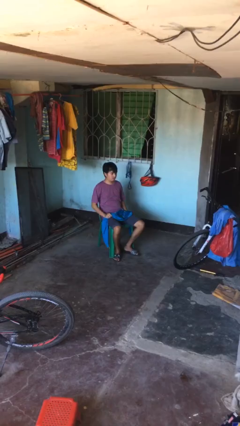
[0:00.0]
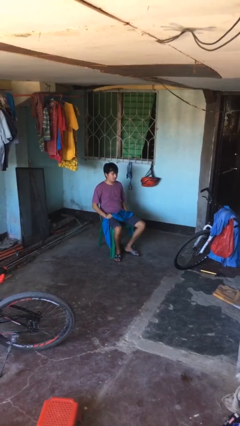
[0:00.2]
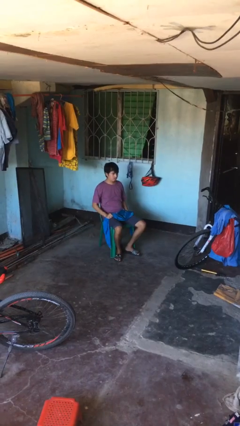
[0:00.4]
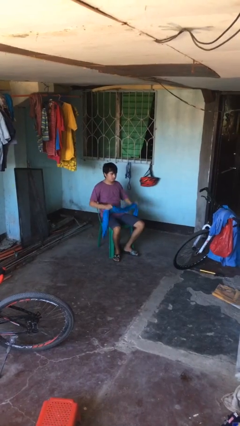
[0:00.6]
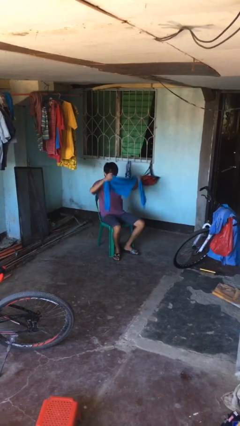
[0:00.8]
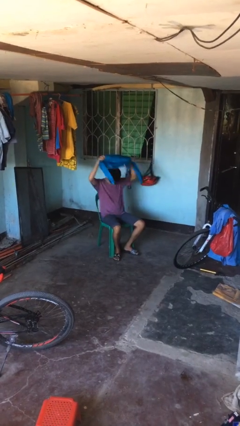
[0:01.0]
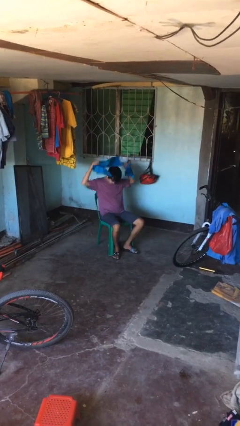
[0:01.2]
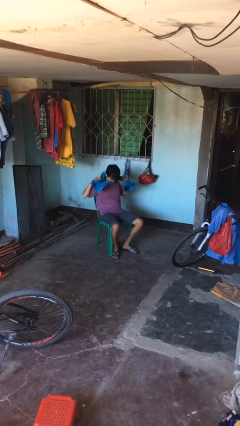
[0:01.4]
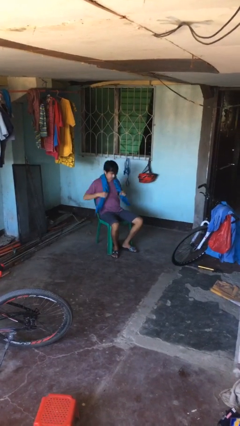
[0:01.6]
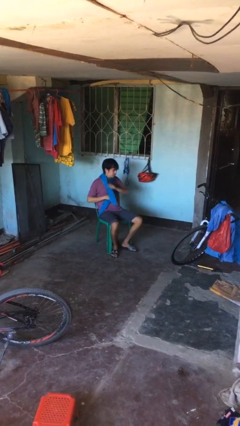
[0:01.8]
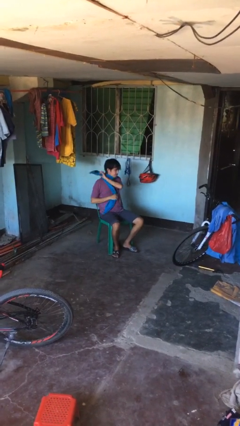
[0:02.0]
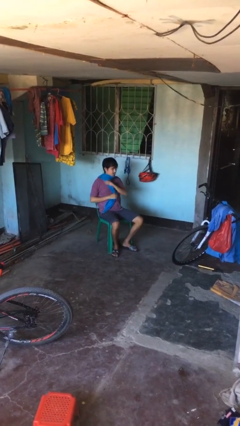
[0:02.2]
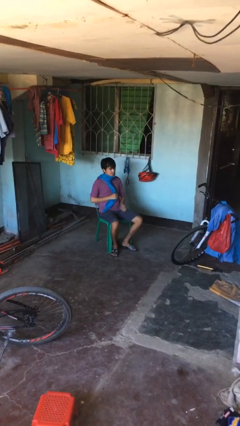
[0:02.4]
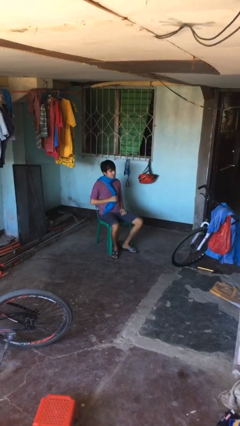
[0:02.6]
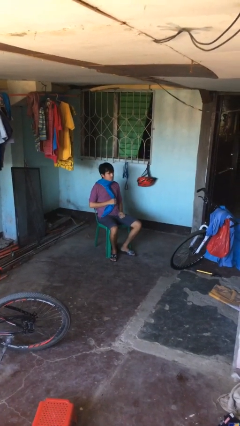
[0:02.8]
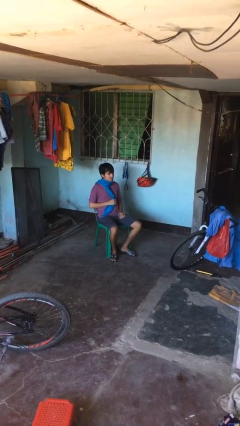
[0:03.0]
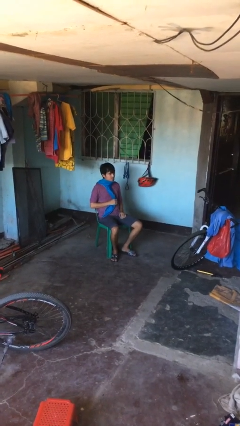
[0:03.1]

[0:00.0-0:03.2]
person puts on scarf

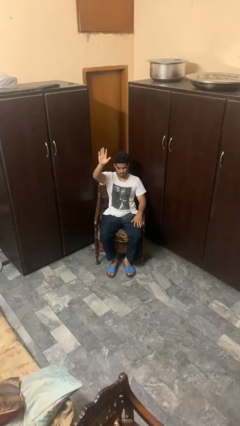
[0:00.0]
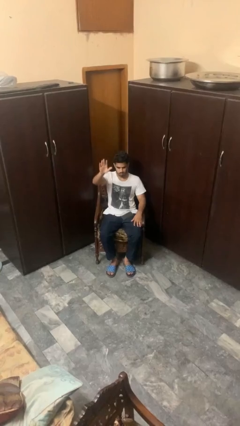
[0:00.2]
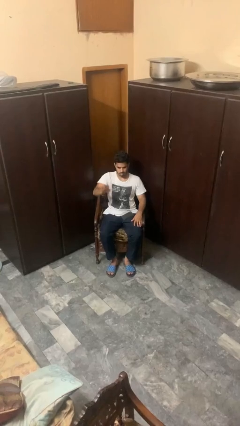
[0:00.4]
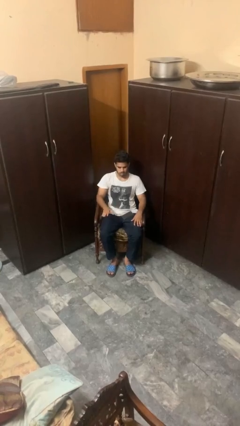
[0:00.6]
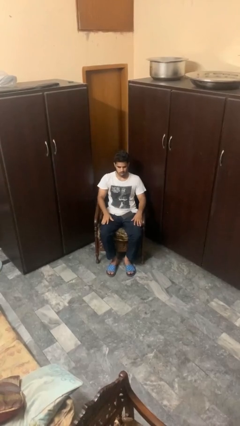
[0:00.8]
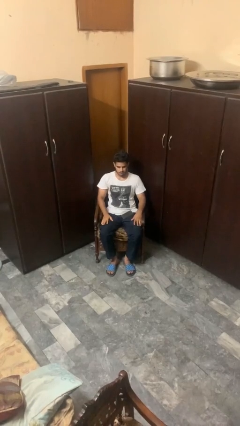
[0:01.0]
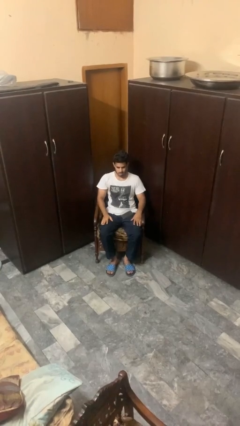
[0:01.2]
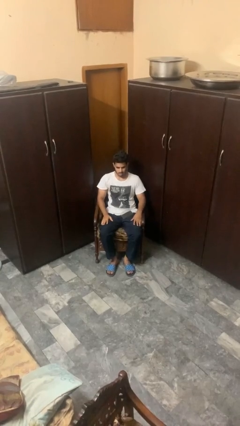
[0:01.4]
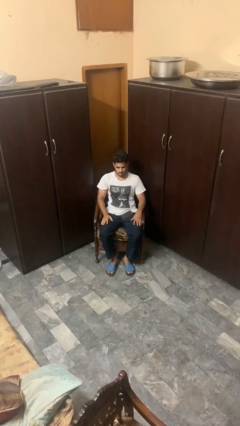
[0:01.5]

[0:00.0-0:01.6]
person gestures lower hand

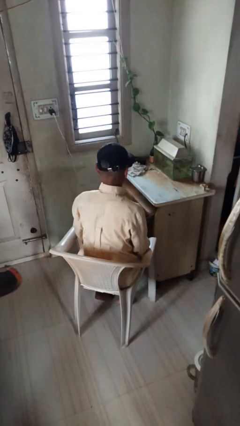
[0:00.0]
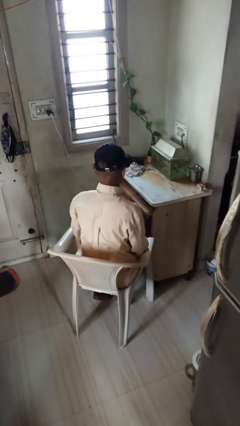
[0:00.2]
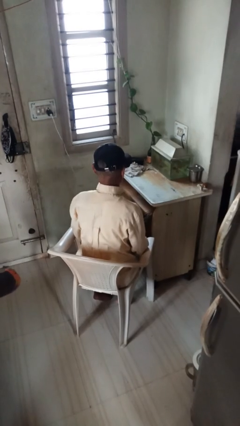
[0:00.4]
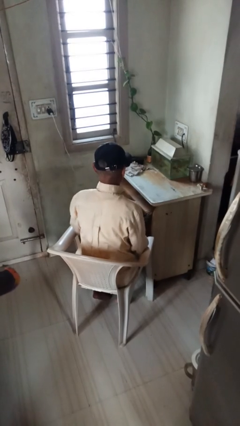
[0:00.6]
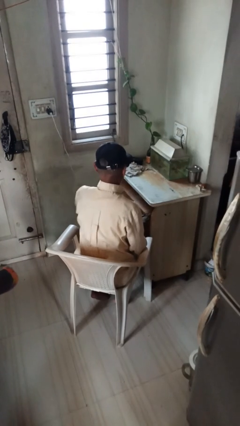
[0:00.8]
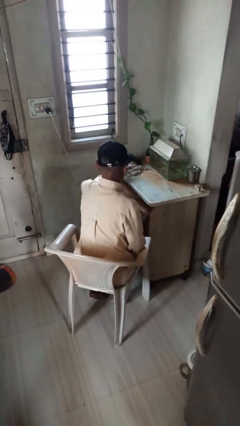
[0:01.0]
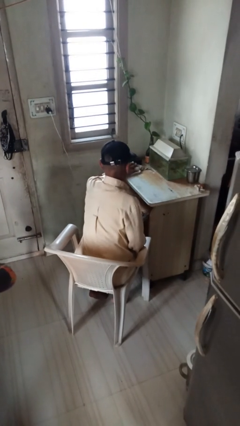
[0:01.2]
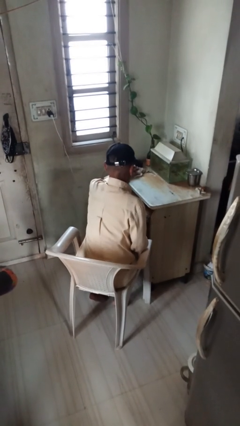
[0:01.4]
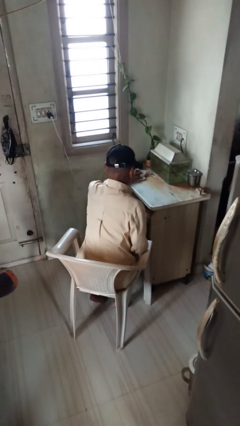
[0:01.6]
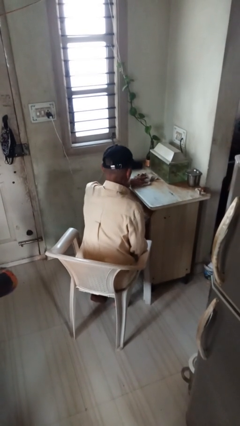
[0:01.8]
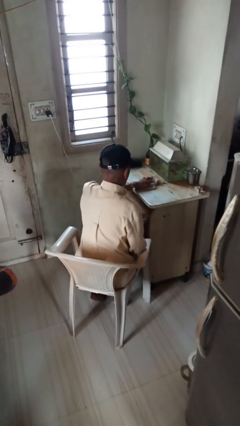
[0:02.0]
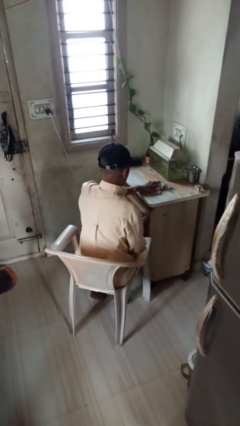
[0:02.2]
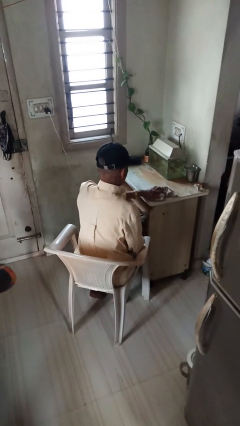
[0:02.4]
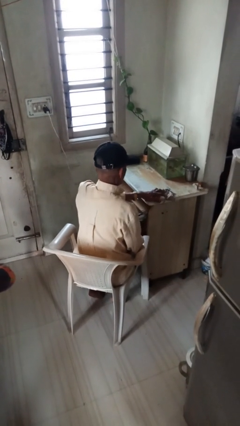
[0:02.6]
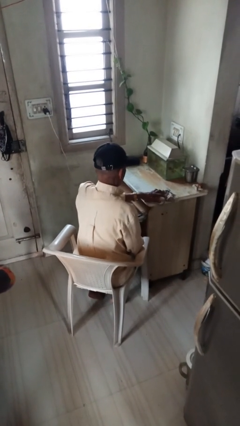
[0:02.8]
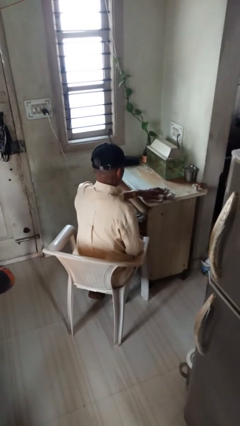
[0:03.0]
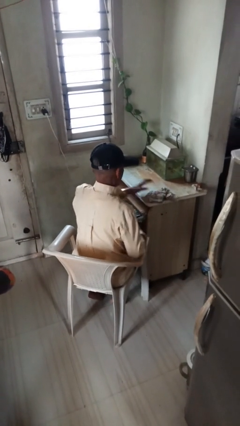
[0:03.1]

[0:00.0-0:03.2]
person cleans table with rag

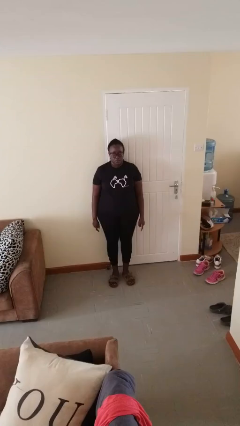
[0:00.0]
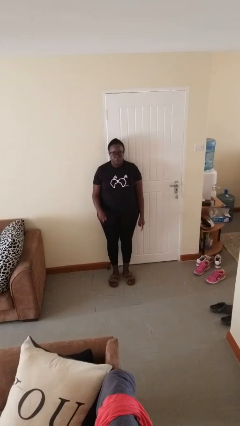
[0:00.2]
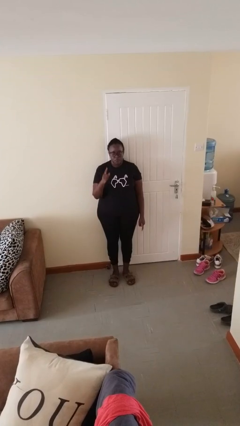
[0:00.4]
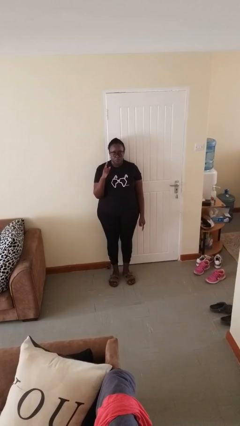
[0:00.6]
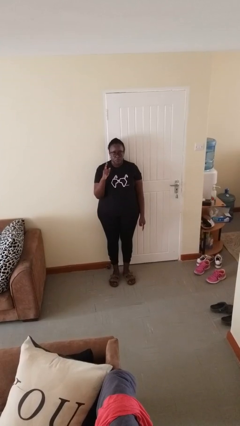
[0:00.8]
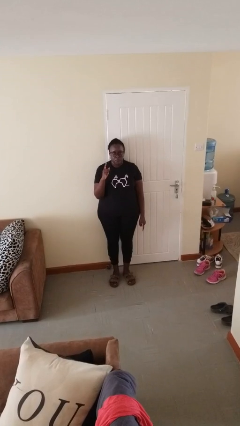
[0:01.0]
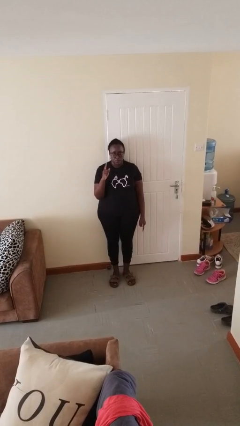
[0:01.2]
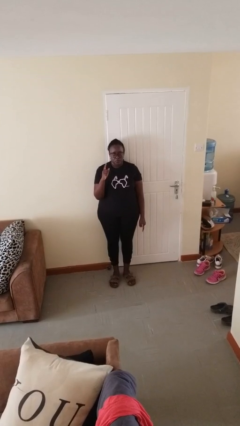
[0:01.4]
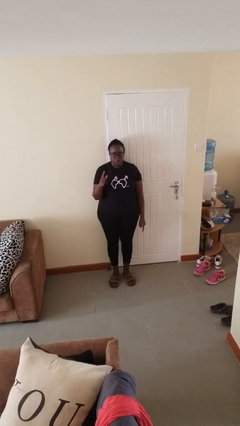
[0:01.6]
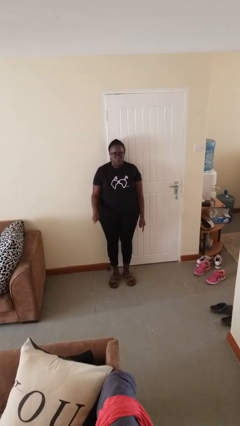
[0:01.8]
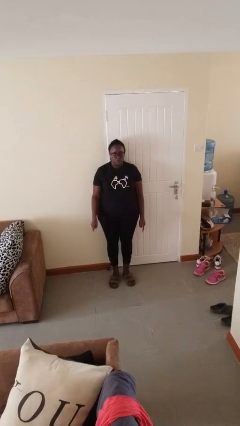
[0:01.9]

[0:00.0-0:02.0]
person gestures number one

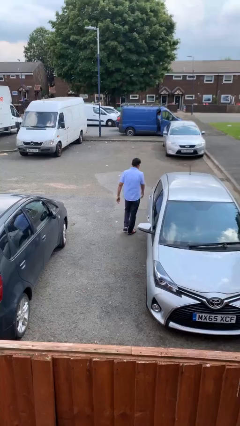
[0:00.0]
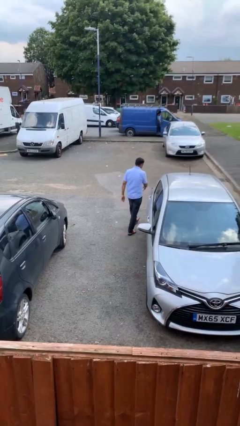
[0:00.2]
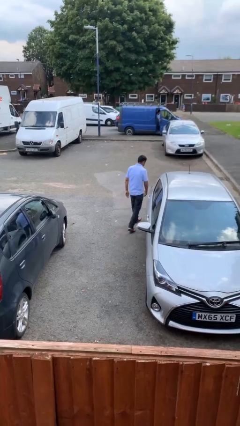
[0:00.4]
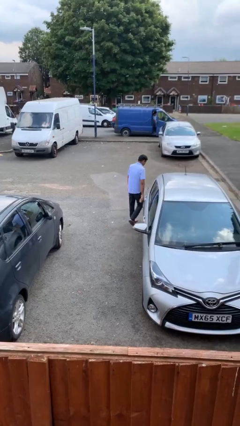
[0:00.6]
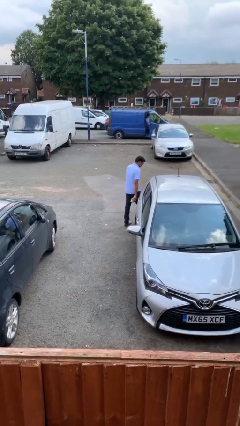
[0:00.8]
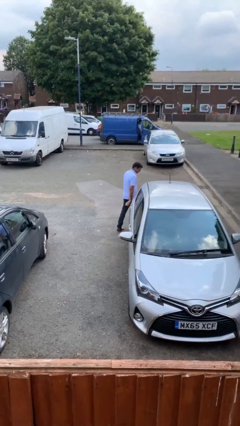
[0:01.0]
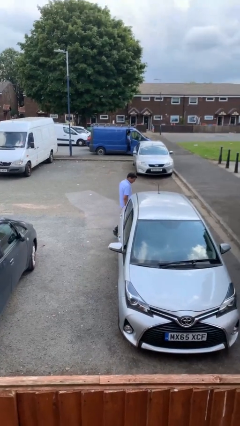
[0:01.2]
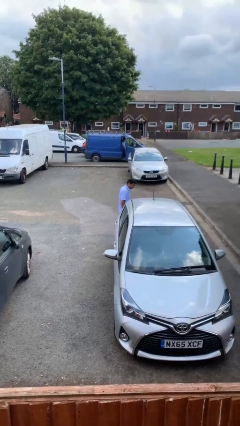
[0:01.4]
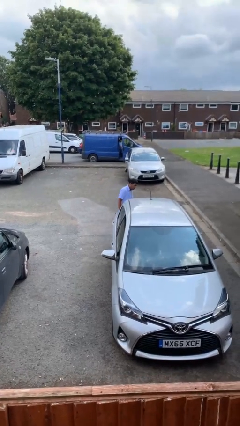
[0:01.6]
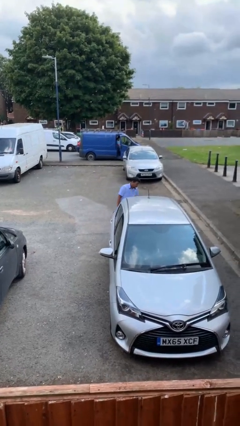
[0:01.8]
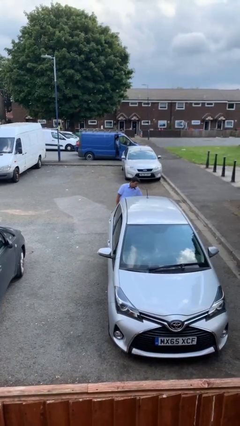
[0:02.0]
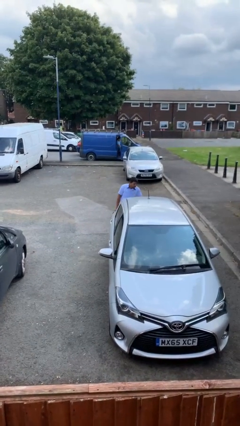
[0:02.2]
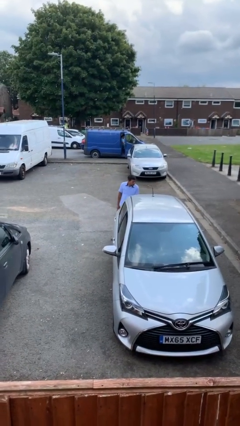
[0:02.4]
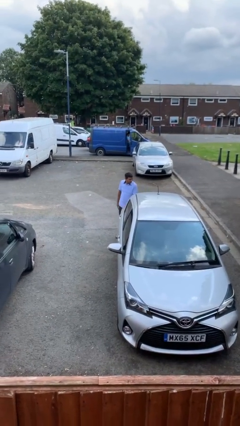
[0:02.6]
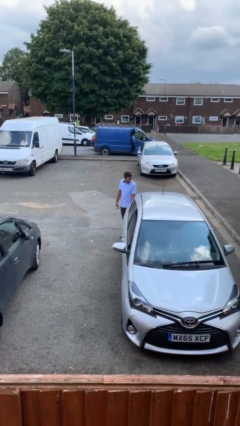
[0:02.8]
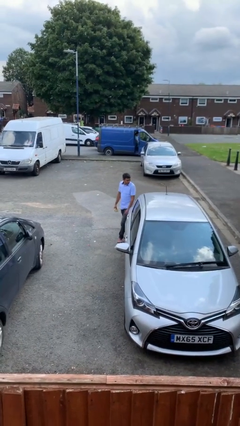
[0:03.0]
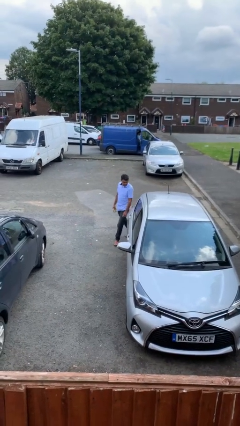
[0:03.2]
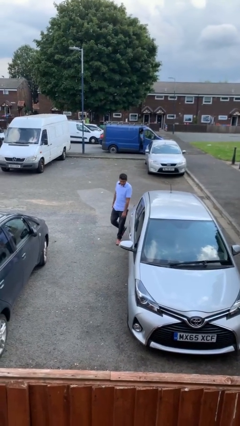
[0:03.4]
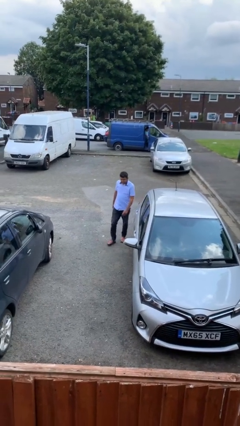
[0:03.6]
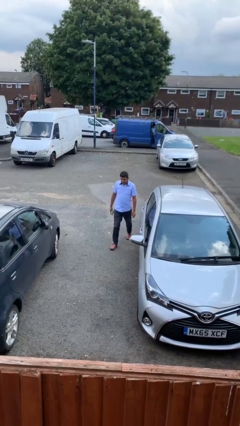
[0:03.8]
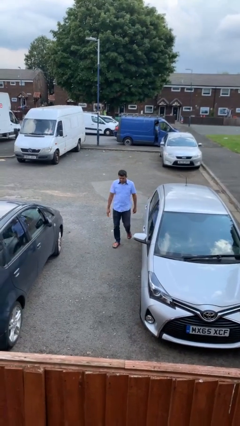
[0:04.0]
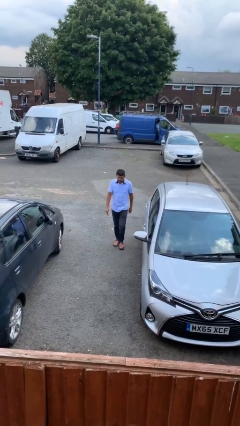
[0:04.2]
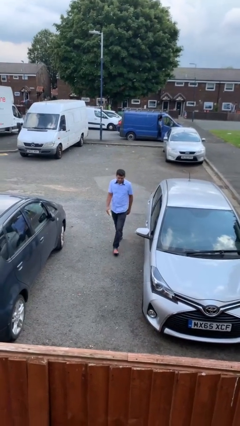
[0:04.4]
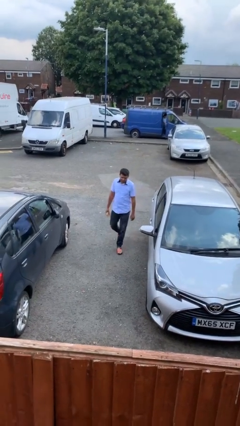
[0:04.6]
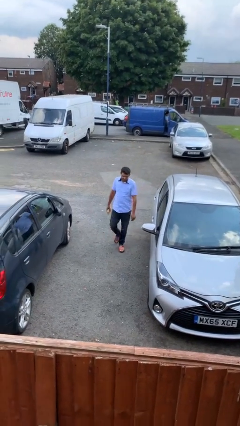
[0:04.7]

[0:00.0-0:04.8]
person walks around car

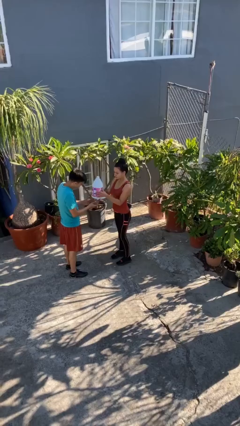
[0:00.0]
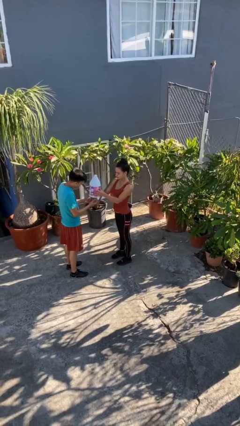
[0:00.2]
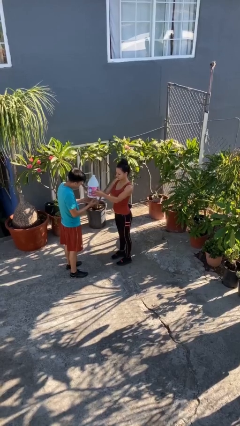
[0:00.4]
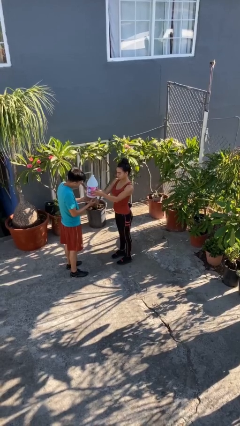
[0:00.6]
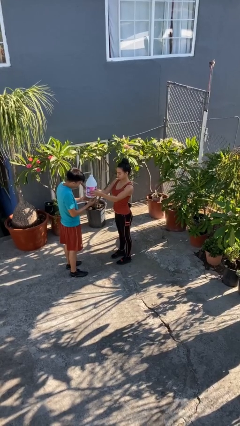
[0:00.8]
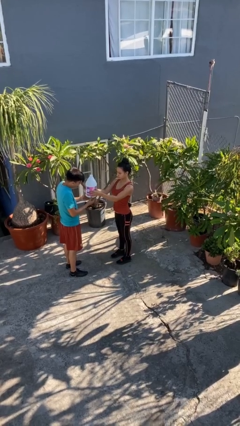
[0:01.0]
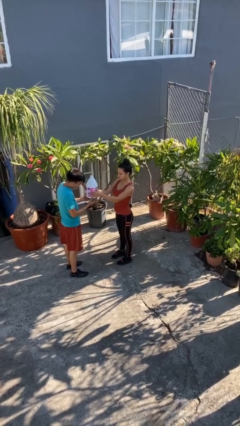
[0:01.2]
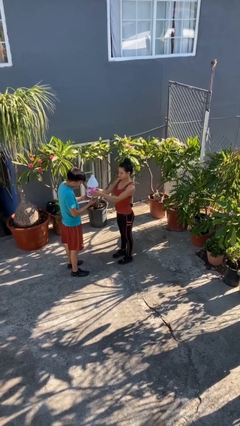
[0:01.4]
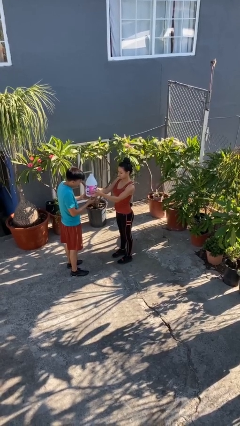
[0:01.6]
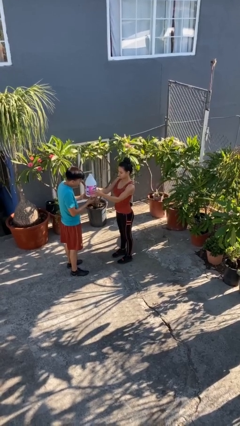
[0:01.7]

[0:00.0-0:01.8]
person transfers object to person

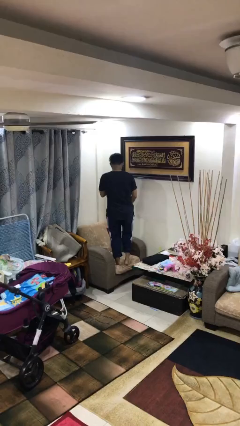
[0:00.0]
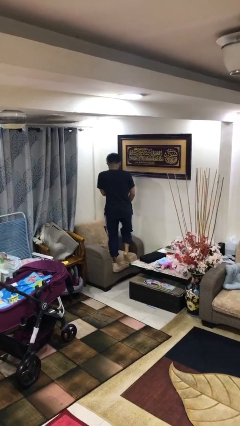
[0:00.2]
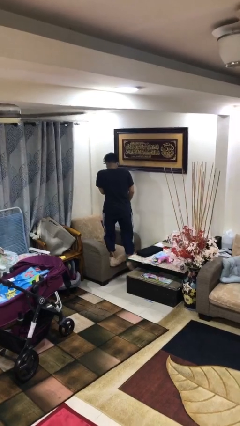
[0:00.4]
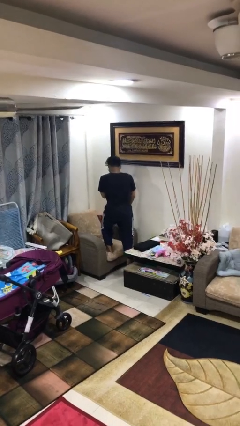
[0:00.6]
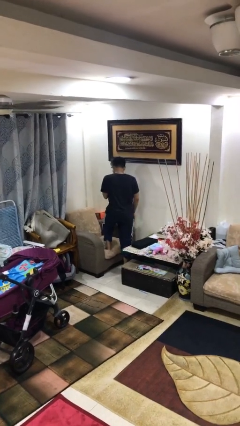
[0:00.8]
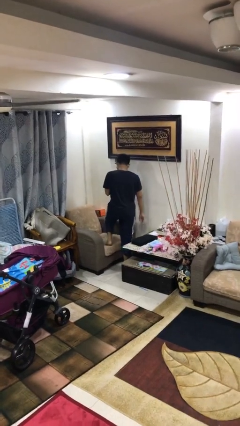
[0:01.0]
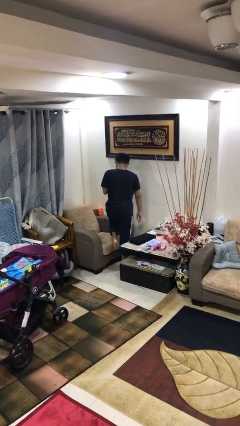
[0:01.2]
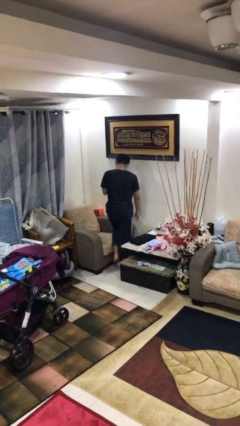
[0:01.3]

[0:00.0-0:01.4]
person climbs off couch
